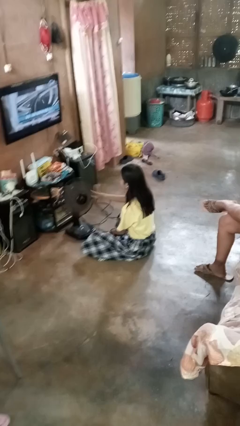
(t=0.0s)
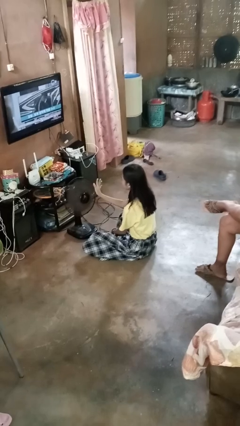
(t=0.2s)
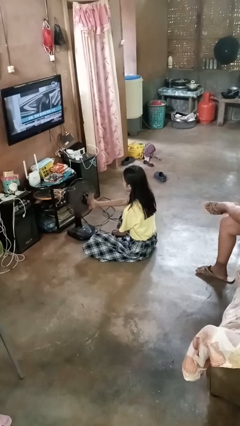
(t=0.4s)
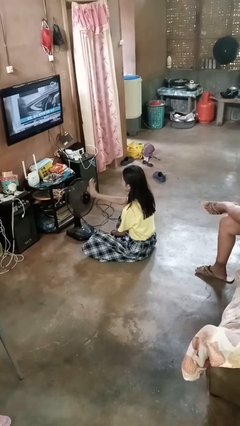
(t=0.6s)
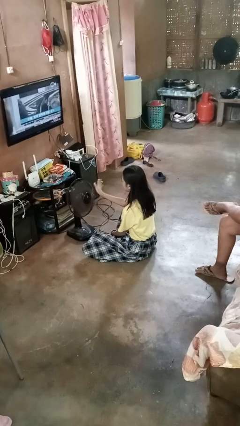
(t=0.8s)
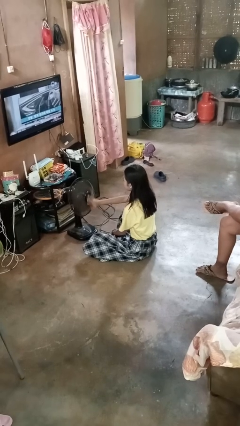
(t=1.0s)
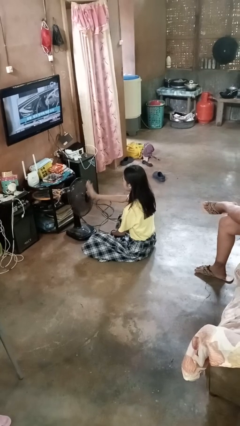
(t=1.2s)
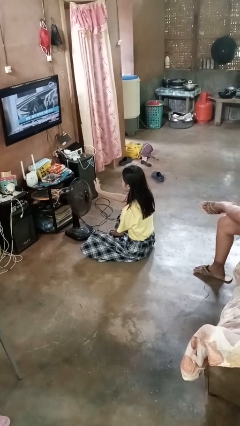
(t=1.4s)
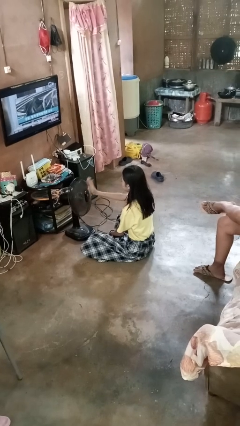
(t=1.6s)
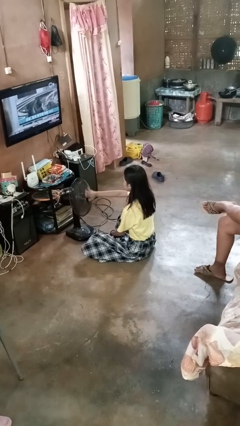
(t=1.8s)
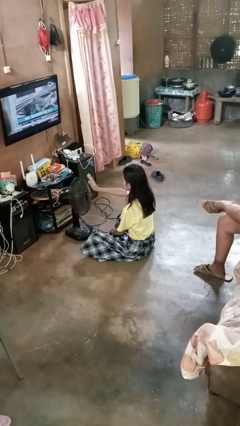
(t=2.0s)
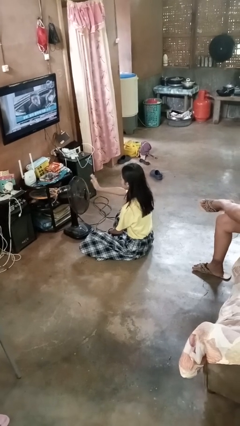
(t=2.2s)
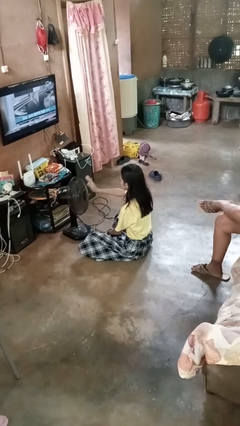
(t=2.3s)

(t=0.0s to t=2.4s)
person waves hand over object

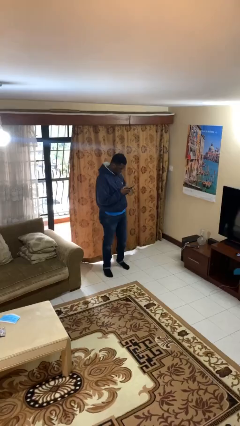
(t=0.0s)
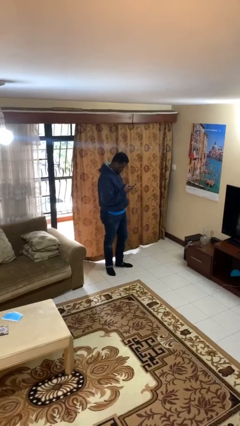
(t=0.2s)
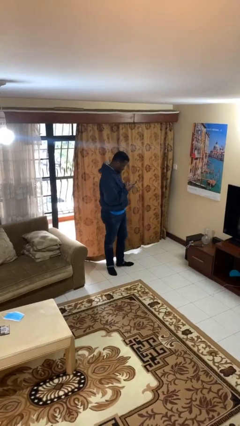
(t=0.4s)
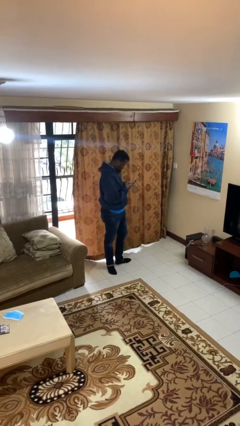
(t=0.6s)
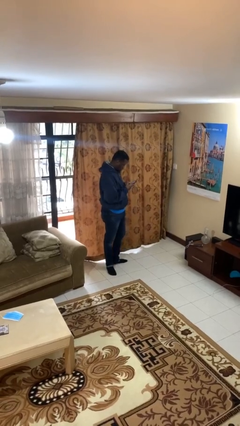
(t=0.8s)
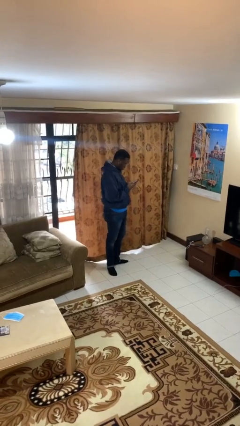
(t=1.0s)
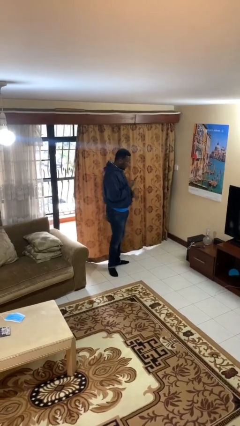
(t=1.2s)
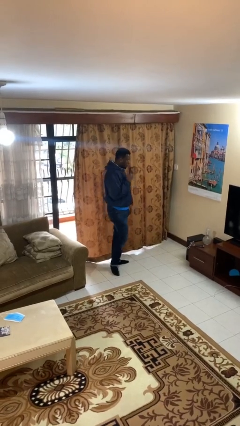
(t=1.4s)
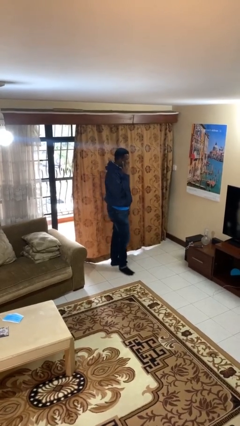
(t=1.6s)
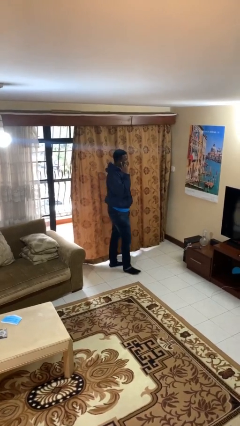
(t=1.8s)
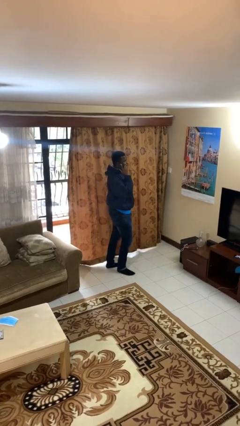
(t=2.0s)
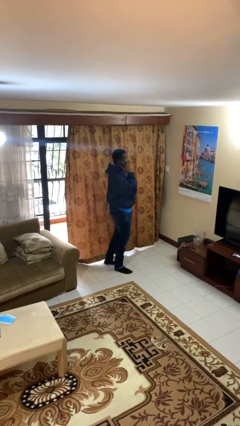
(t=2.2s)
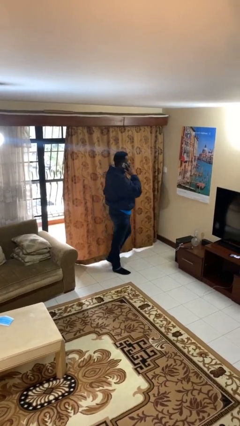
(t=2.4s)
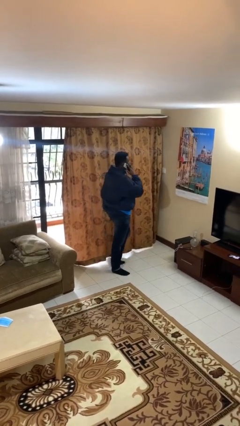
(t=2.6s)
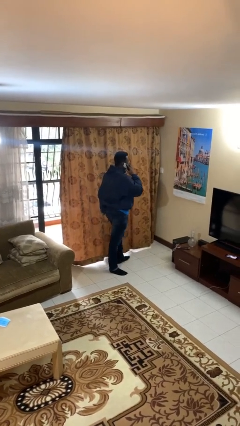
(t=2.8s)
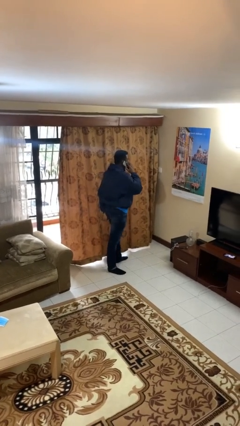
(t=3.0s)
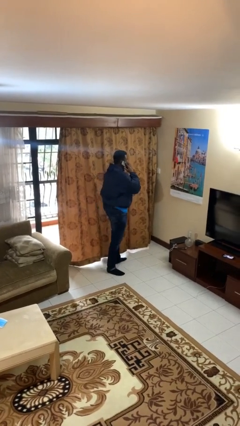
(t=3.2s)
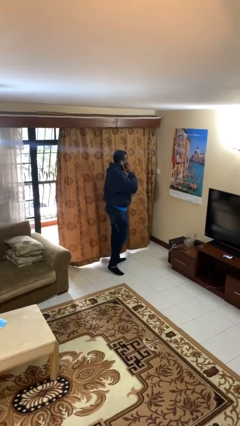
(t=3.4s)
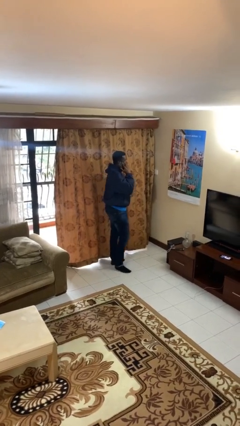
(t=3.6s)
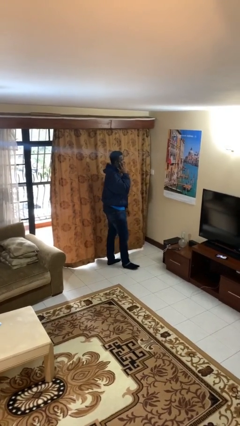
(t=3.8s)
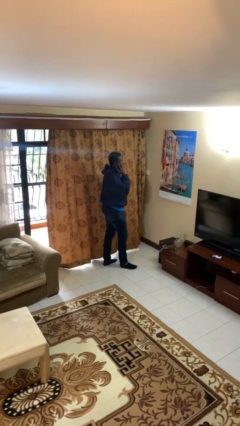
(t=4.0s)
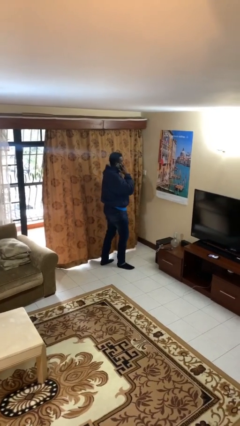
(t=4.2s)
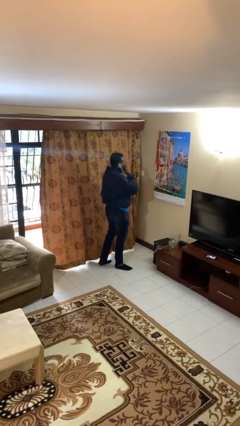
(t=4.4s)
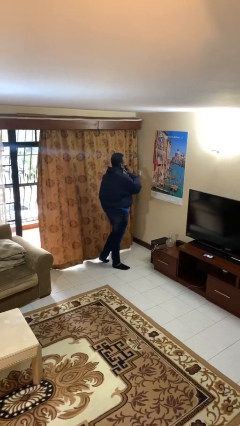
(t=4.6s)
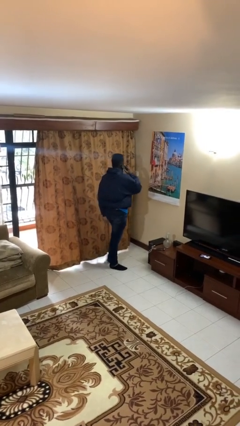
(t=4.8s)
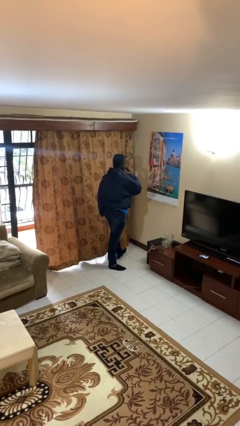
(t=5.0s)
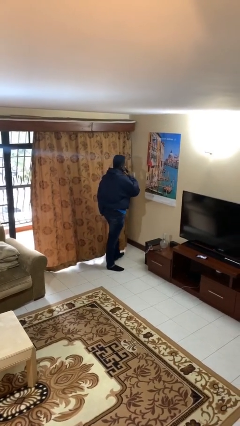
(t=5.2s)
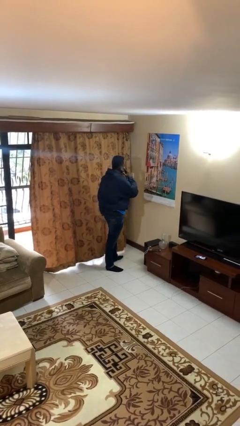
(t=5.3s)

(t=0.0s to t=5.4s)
person talks on phone

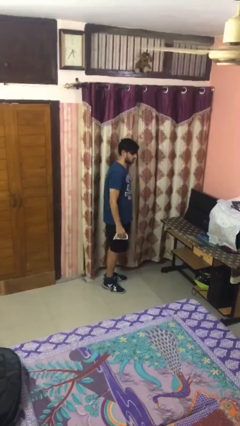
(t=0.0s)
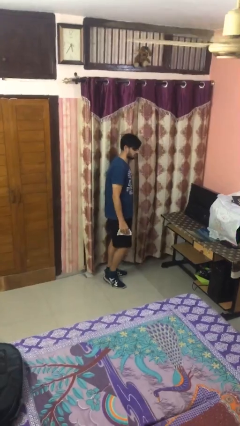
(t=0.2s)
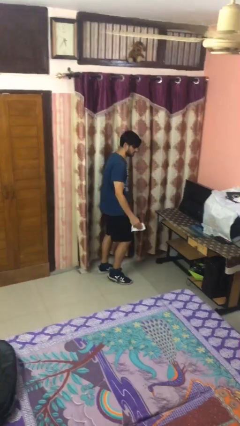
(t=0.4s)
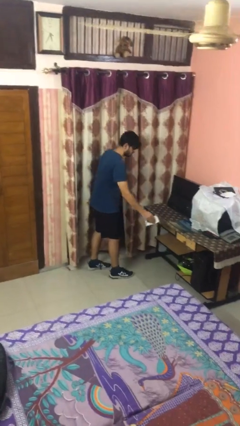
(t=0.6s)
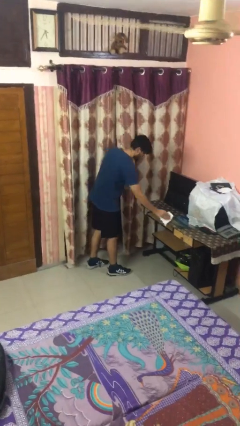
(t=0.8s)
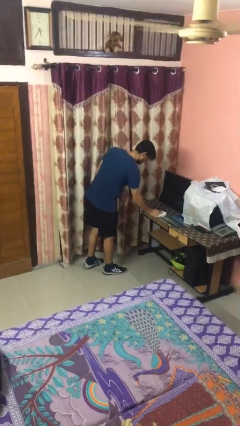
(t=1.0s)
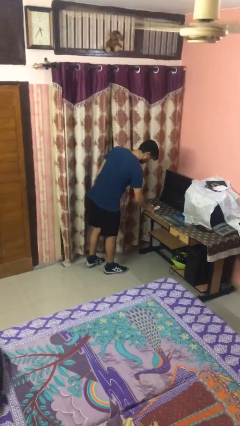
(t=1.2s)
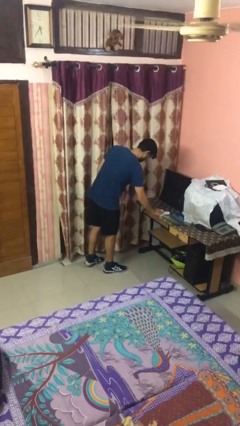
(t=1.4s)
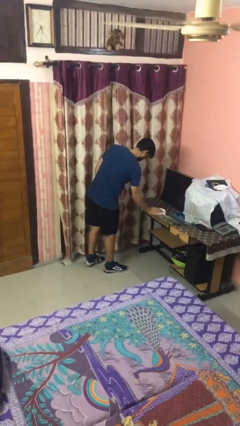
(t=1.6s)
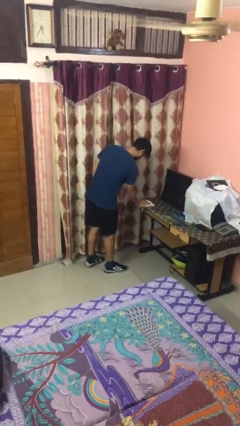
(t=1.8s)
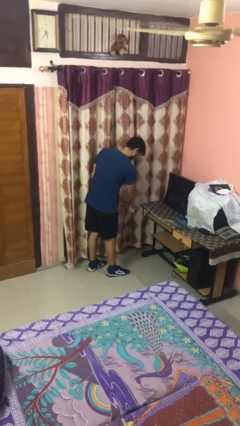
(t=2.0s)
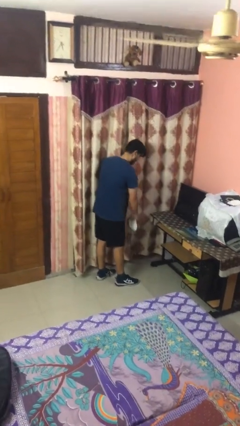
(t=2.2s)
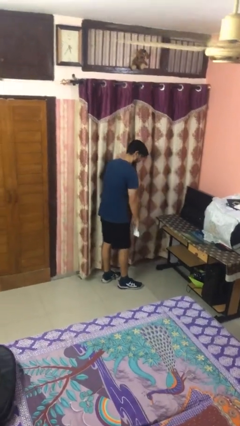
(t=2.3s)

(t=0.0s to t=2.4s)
person cleans table with rag

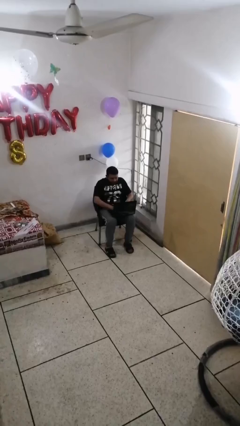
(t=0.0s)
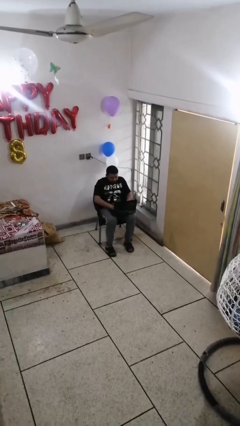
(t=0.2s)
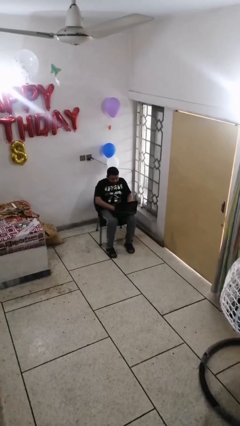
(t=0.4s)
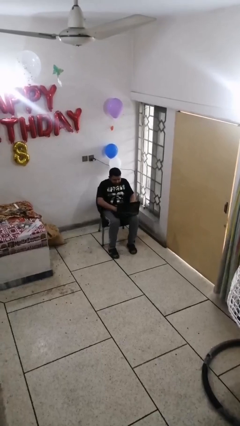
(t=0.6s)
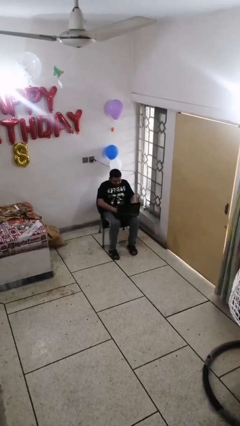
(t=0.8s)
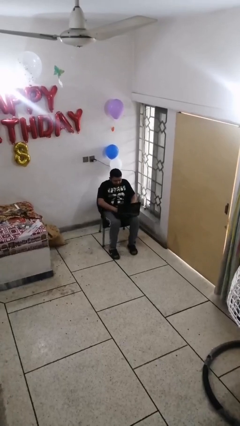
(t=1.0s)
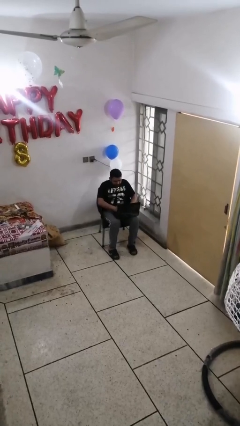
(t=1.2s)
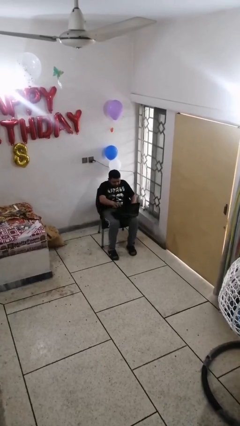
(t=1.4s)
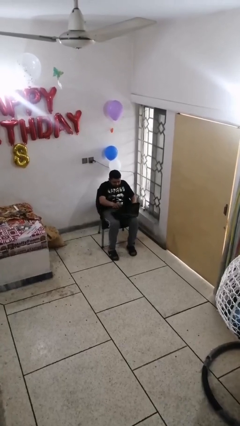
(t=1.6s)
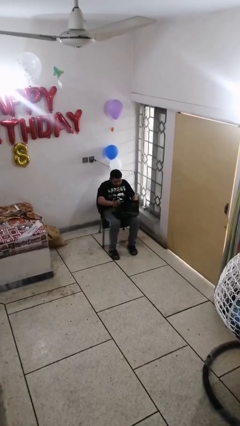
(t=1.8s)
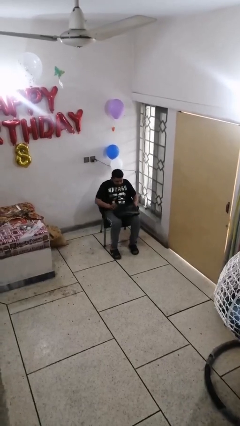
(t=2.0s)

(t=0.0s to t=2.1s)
person interacts with laptop

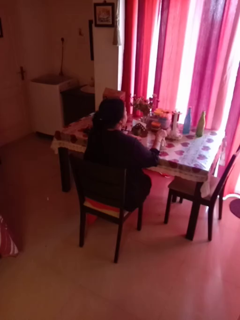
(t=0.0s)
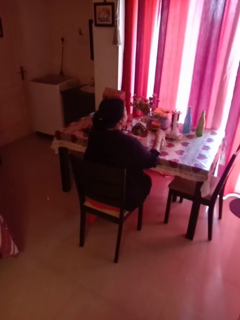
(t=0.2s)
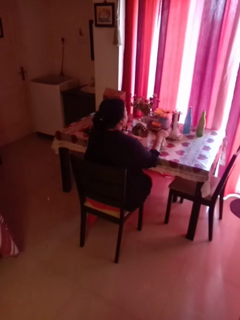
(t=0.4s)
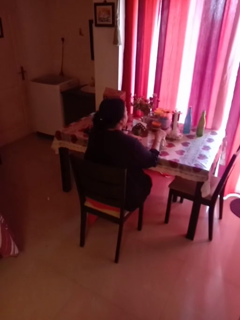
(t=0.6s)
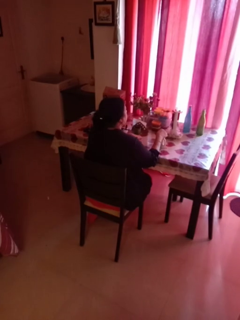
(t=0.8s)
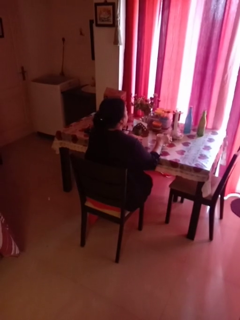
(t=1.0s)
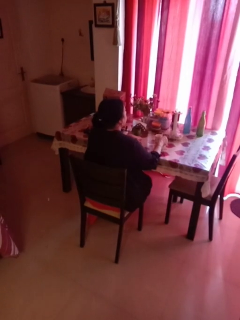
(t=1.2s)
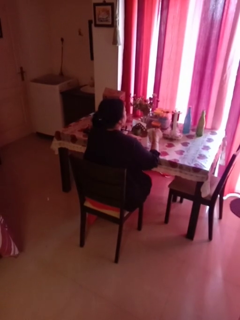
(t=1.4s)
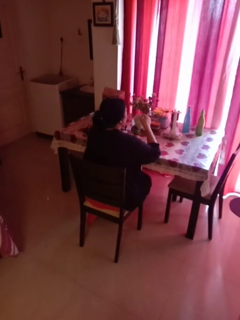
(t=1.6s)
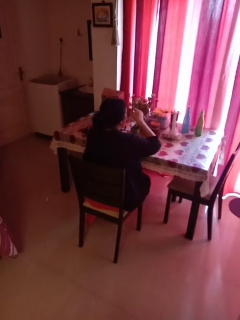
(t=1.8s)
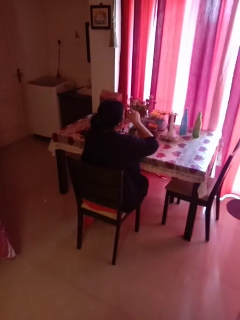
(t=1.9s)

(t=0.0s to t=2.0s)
person stirs mug

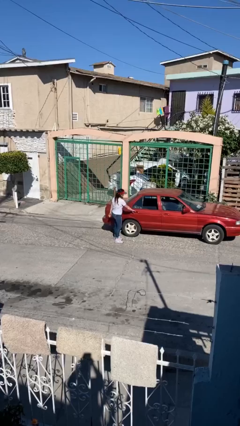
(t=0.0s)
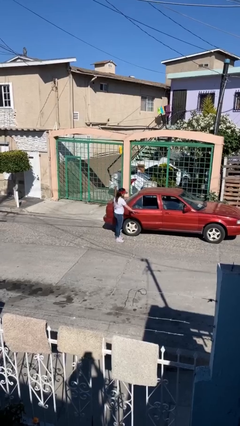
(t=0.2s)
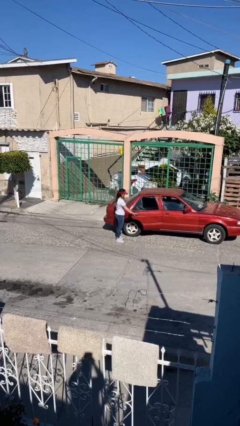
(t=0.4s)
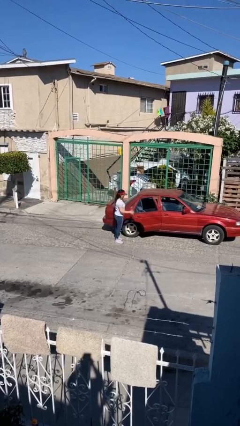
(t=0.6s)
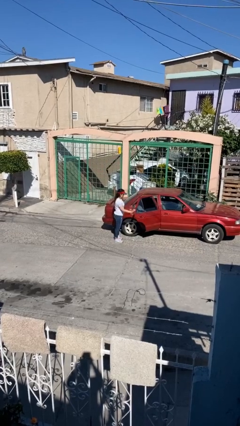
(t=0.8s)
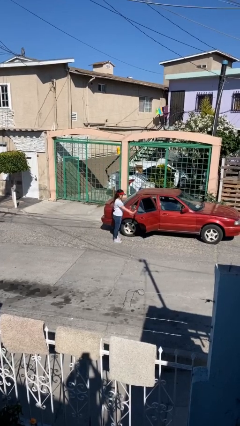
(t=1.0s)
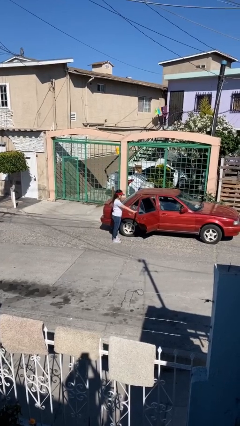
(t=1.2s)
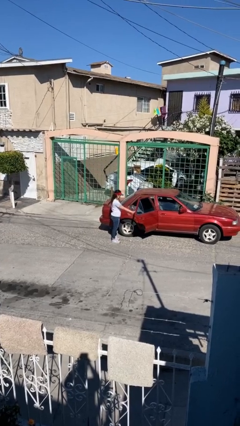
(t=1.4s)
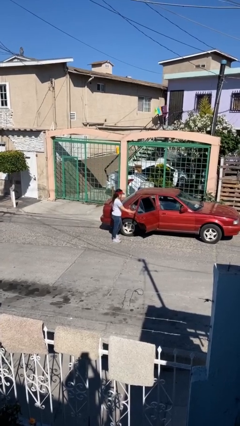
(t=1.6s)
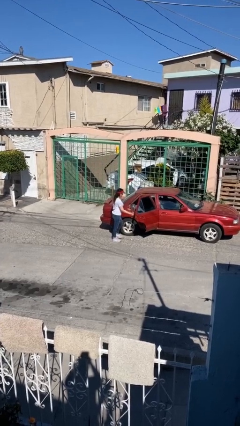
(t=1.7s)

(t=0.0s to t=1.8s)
person opens car door

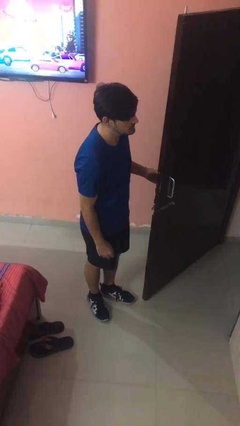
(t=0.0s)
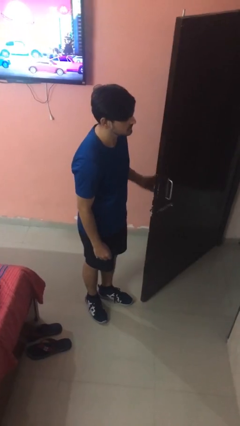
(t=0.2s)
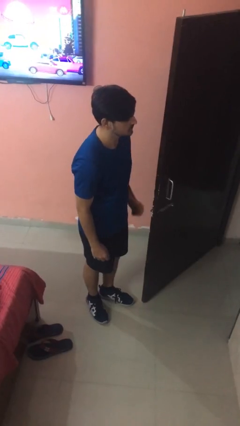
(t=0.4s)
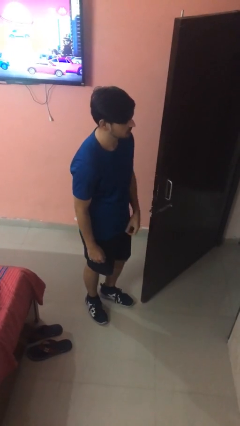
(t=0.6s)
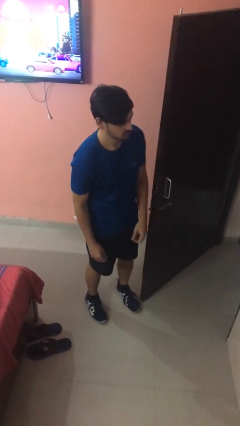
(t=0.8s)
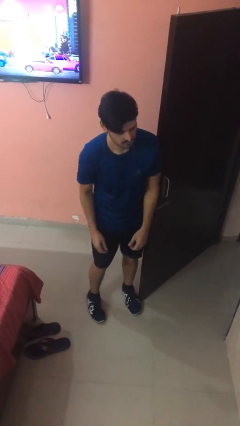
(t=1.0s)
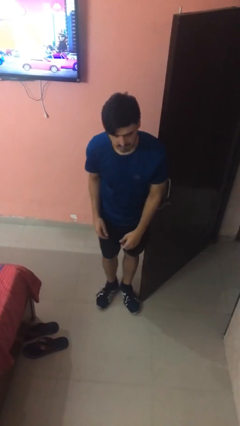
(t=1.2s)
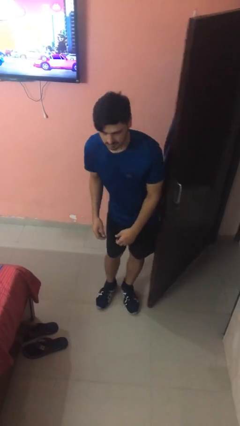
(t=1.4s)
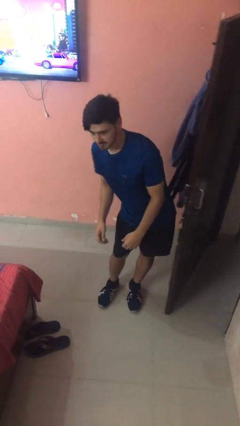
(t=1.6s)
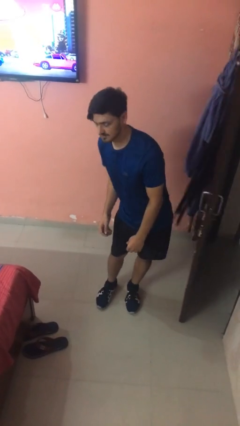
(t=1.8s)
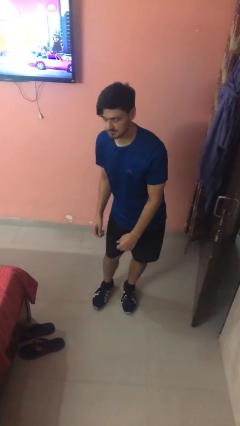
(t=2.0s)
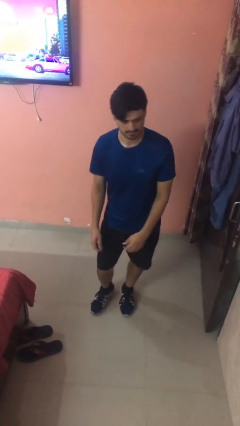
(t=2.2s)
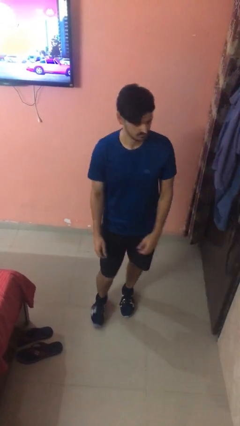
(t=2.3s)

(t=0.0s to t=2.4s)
person closes door with hip
